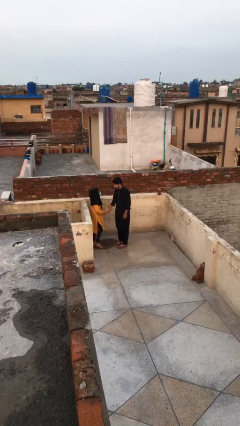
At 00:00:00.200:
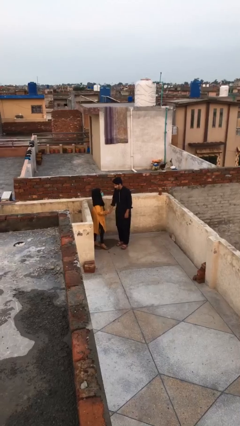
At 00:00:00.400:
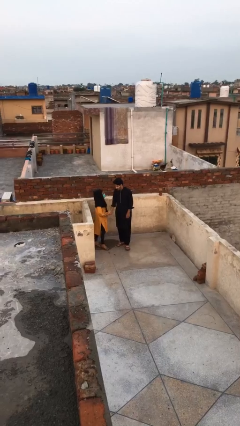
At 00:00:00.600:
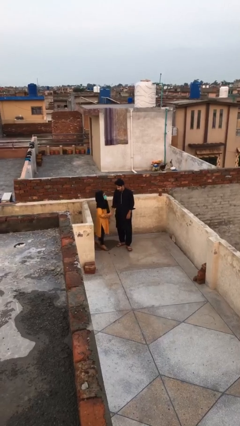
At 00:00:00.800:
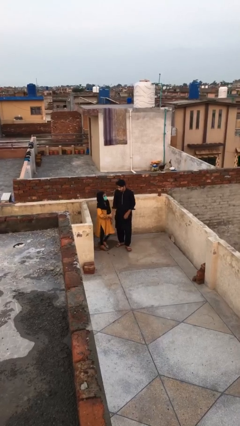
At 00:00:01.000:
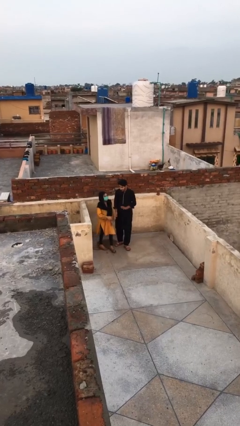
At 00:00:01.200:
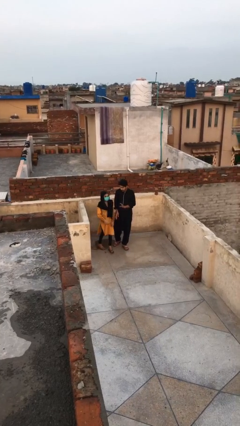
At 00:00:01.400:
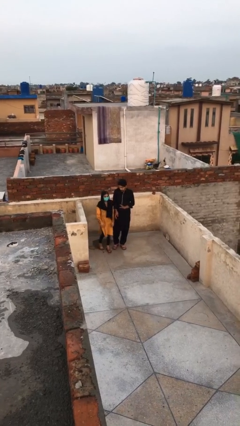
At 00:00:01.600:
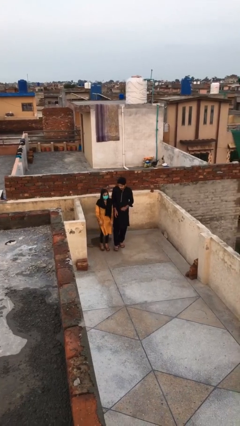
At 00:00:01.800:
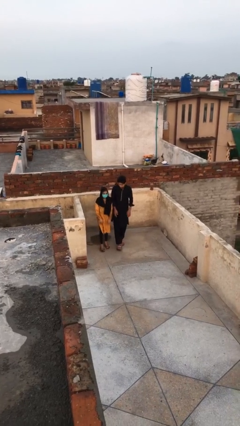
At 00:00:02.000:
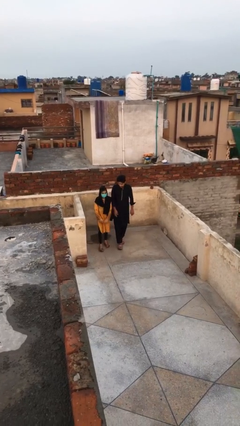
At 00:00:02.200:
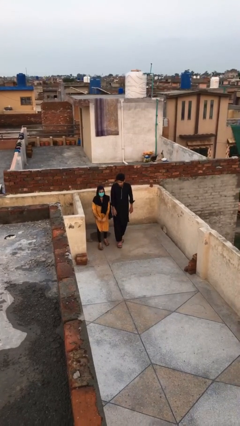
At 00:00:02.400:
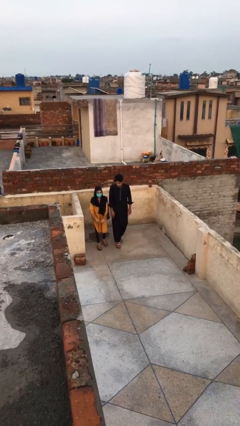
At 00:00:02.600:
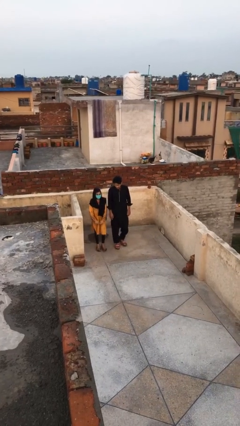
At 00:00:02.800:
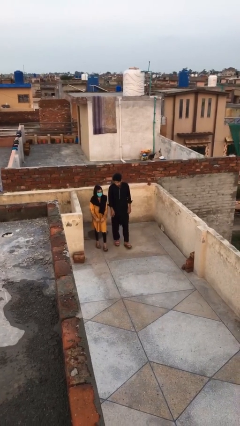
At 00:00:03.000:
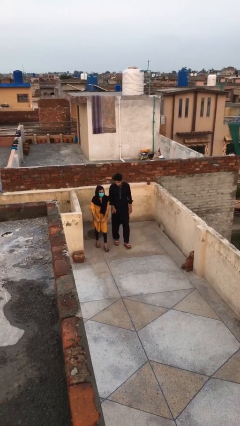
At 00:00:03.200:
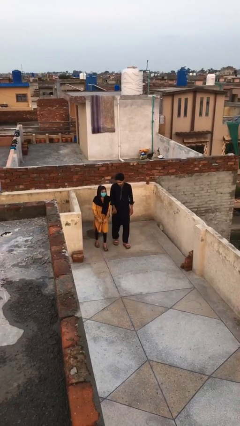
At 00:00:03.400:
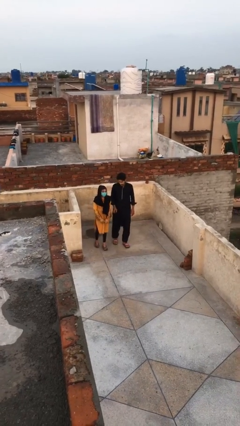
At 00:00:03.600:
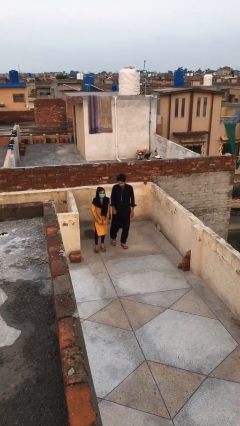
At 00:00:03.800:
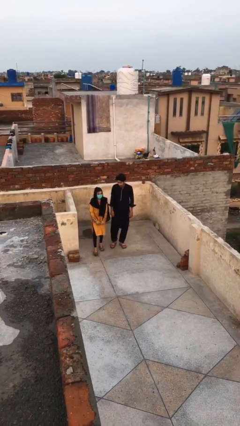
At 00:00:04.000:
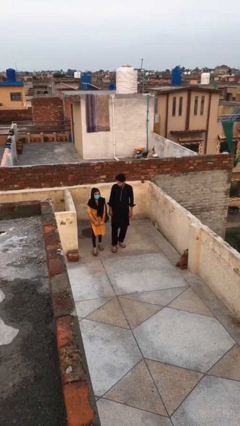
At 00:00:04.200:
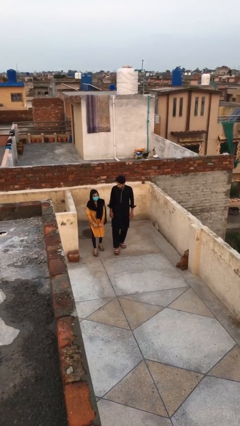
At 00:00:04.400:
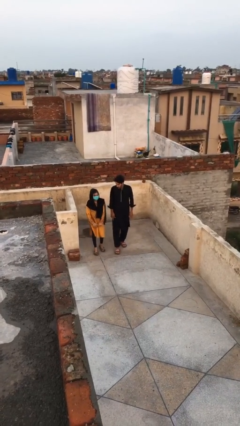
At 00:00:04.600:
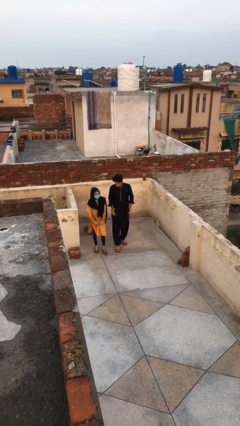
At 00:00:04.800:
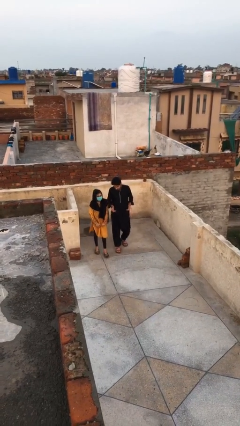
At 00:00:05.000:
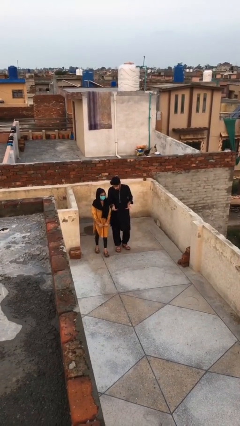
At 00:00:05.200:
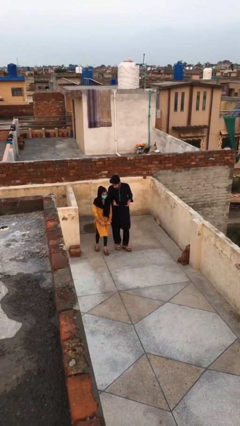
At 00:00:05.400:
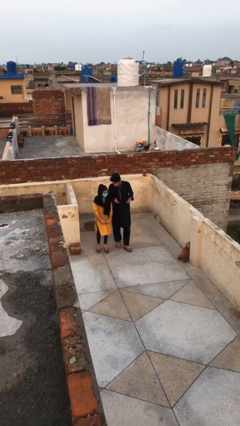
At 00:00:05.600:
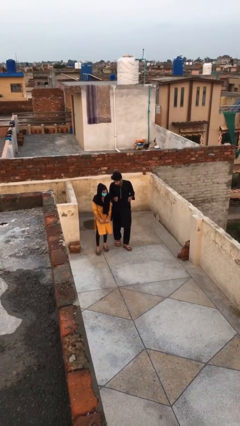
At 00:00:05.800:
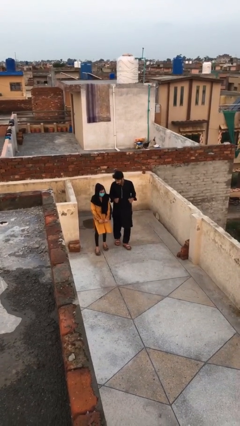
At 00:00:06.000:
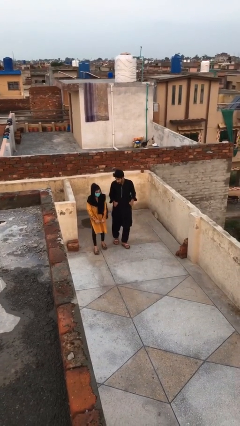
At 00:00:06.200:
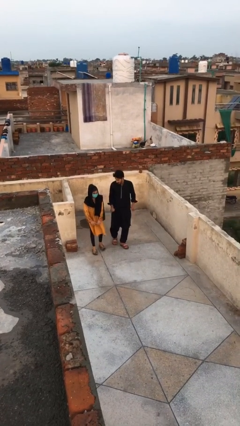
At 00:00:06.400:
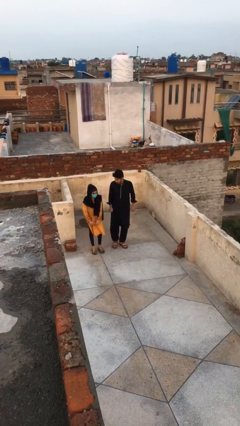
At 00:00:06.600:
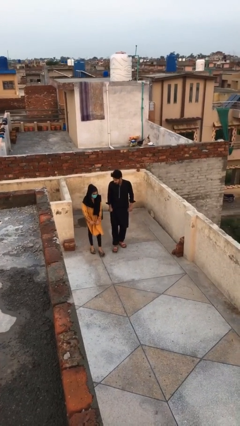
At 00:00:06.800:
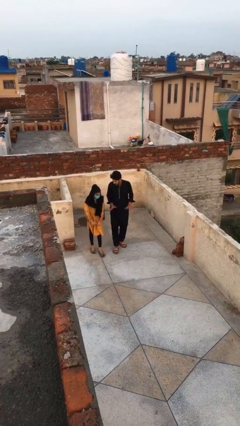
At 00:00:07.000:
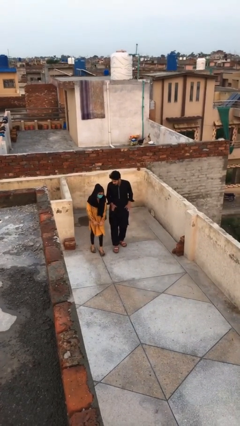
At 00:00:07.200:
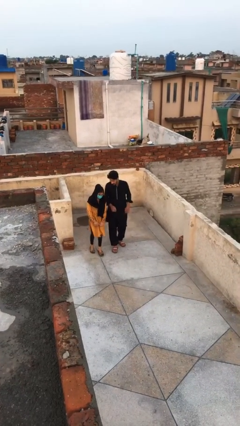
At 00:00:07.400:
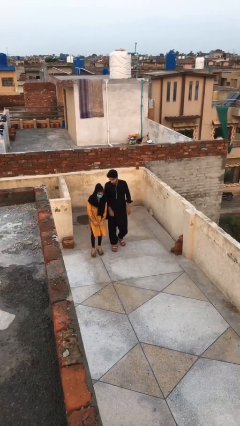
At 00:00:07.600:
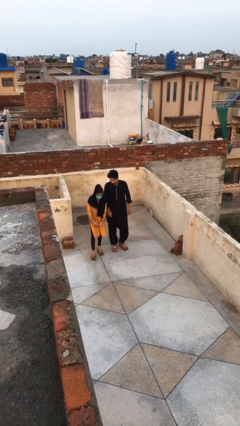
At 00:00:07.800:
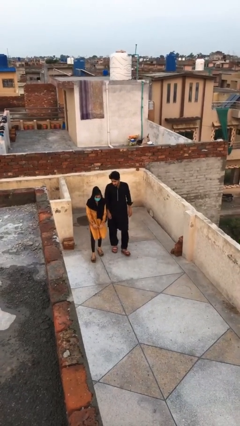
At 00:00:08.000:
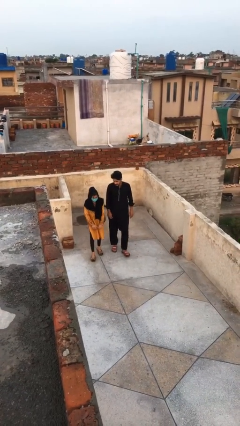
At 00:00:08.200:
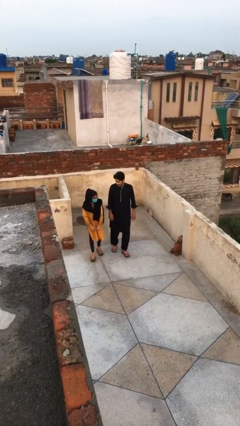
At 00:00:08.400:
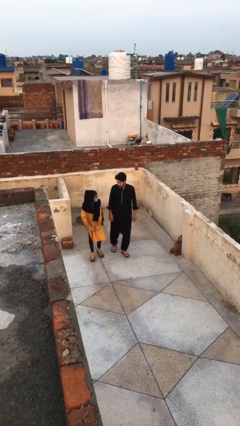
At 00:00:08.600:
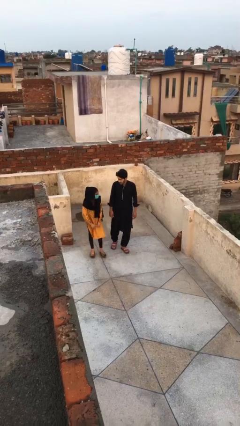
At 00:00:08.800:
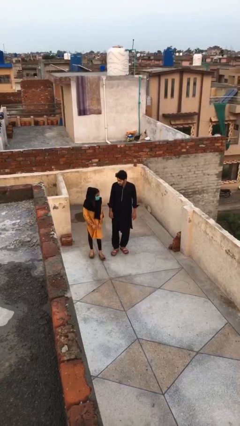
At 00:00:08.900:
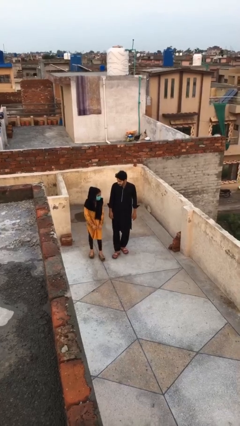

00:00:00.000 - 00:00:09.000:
person talks to person

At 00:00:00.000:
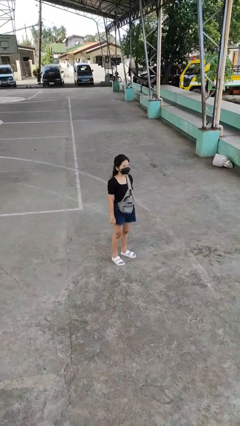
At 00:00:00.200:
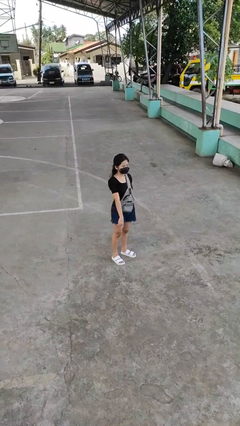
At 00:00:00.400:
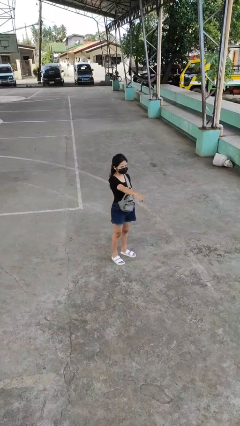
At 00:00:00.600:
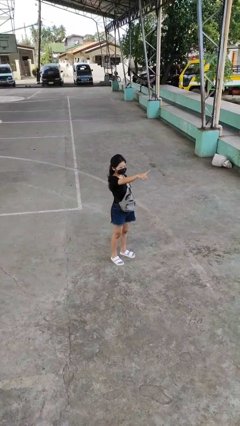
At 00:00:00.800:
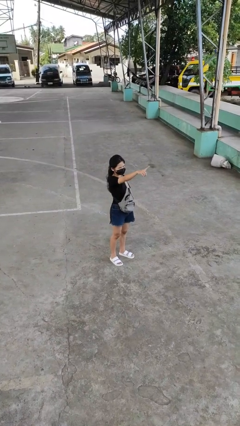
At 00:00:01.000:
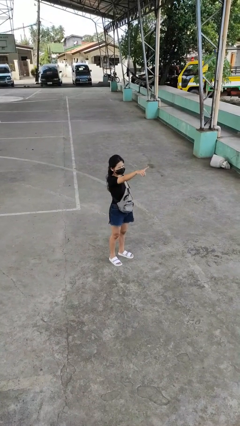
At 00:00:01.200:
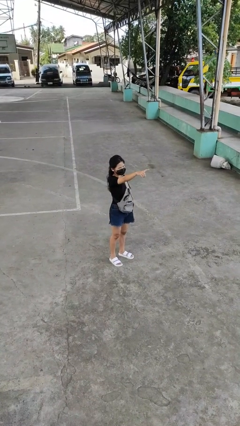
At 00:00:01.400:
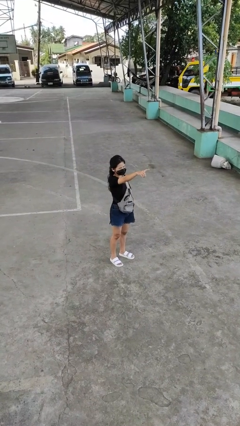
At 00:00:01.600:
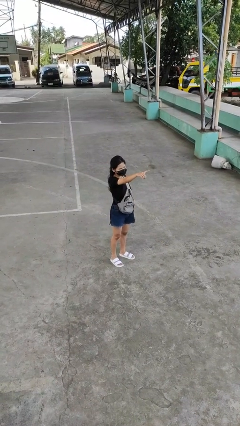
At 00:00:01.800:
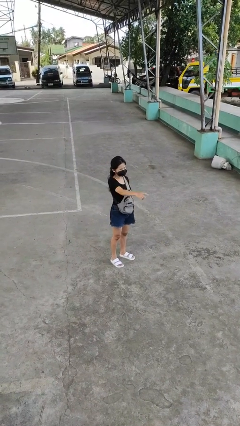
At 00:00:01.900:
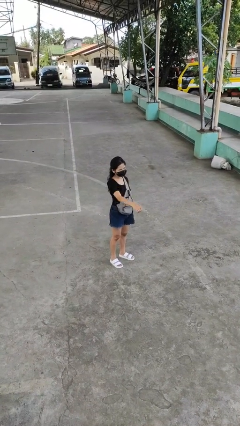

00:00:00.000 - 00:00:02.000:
person points at person

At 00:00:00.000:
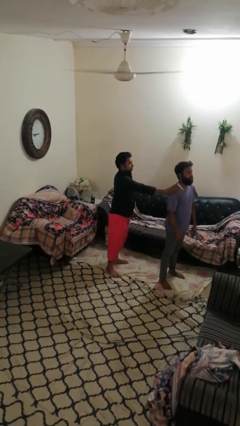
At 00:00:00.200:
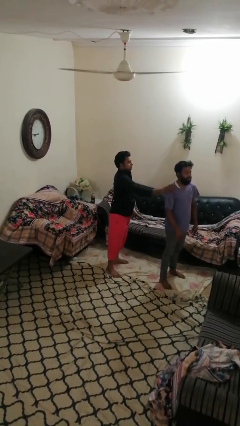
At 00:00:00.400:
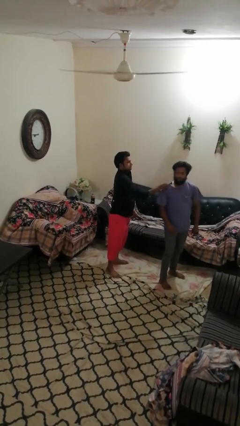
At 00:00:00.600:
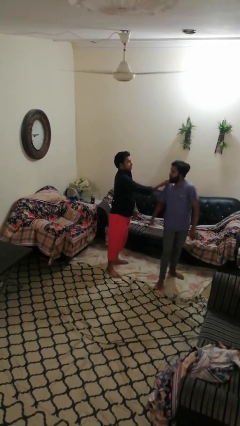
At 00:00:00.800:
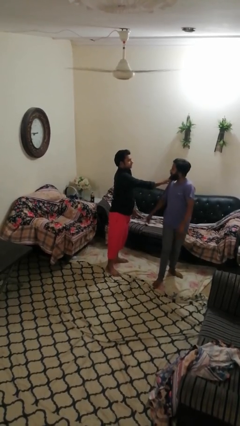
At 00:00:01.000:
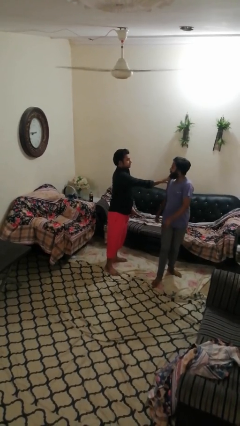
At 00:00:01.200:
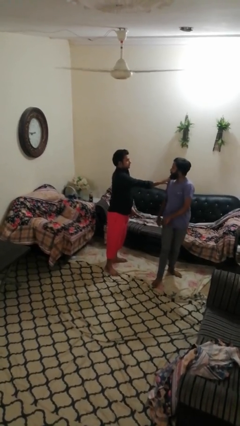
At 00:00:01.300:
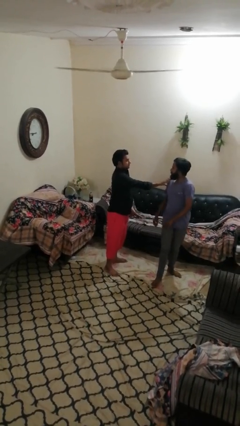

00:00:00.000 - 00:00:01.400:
person spins person around

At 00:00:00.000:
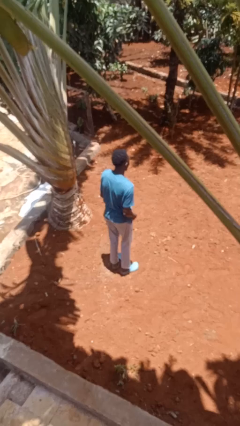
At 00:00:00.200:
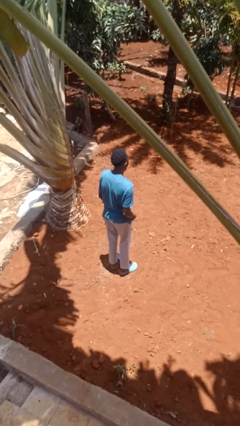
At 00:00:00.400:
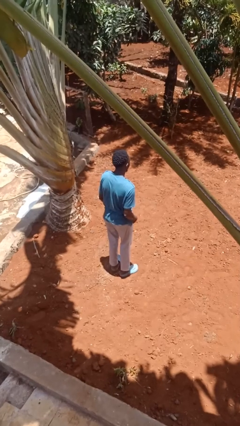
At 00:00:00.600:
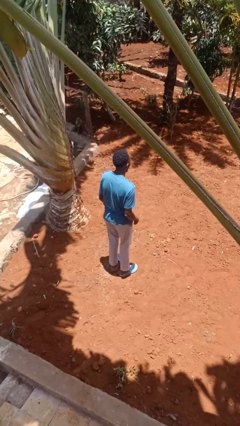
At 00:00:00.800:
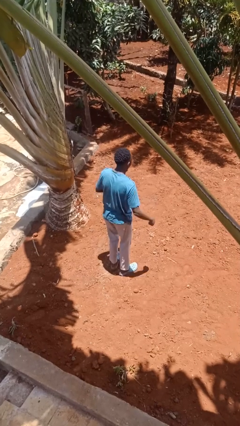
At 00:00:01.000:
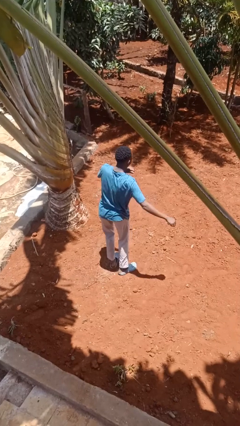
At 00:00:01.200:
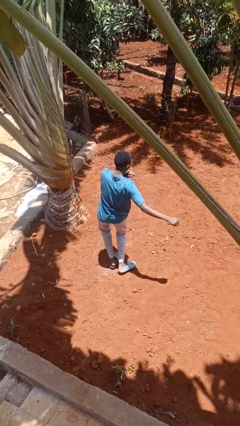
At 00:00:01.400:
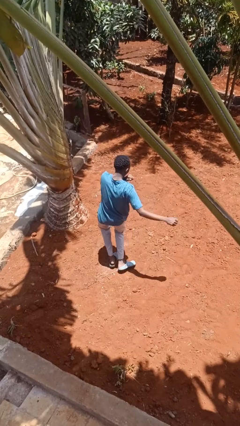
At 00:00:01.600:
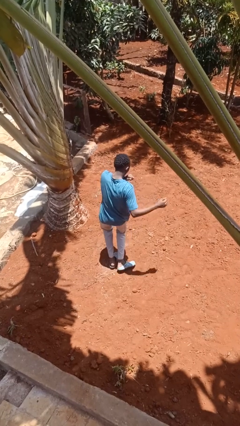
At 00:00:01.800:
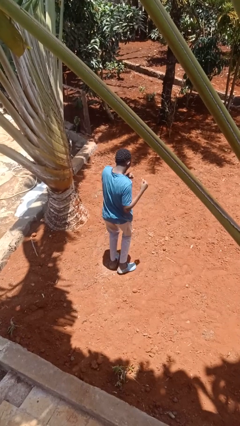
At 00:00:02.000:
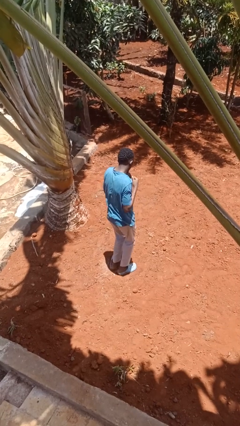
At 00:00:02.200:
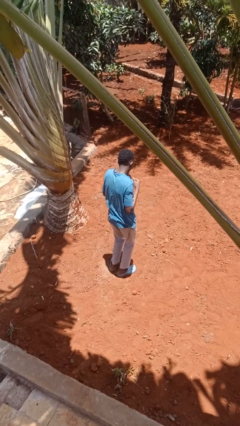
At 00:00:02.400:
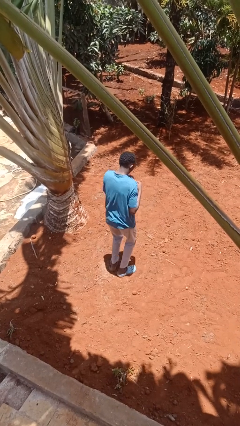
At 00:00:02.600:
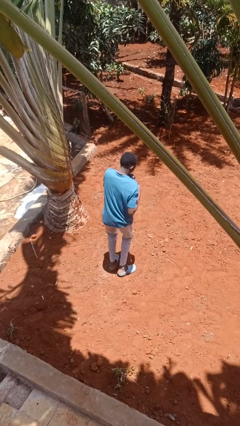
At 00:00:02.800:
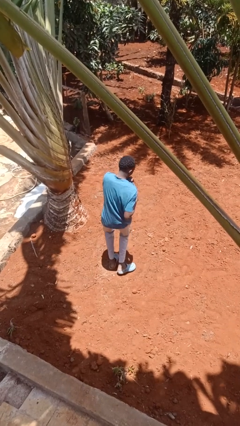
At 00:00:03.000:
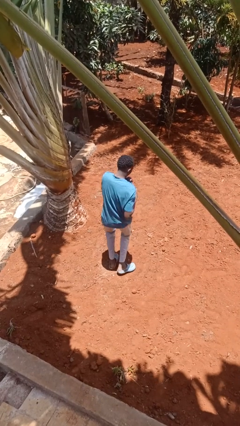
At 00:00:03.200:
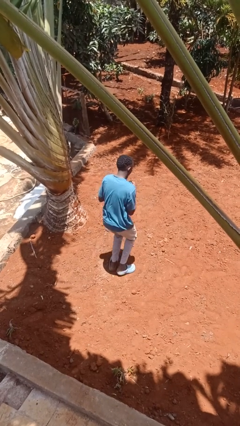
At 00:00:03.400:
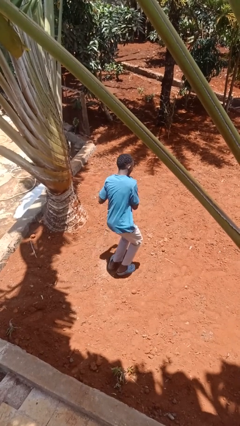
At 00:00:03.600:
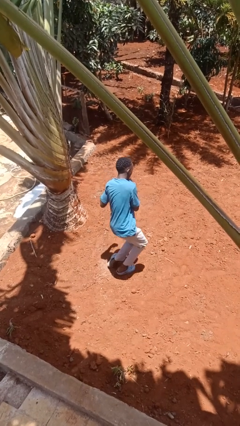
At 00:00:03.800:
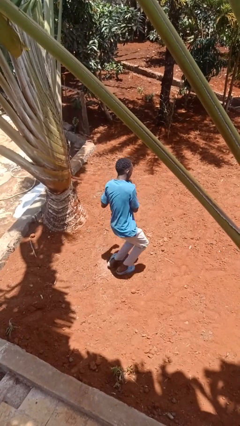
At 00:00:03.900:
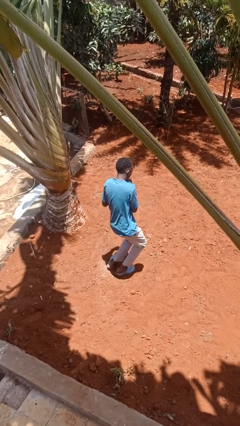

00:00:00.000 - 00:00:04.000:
person dances in place

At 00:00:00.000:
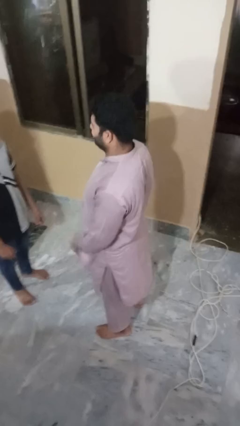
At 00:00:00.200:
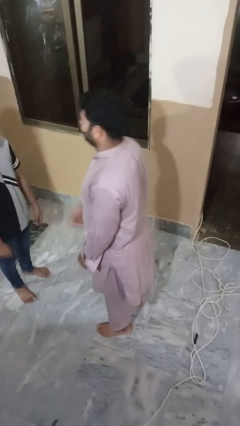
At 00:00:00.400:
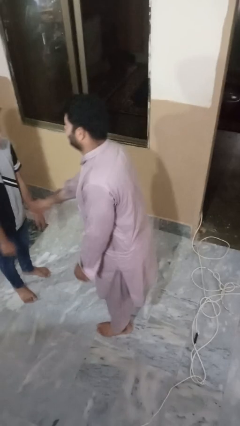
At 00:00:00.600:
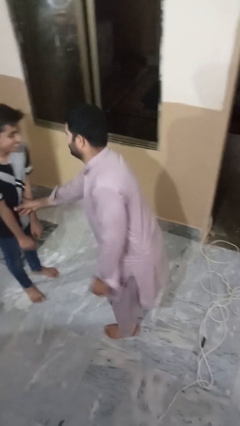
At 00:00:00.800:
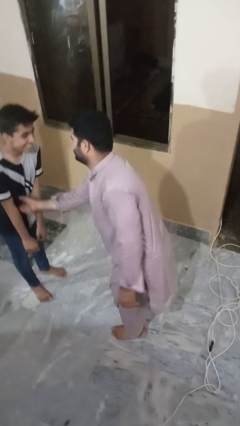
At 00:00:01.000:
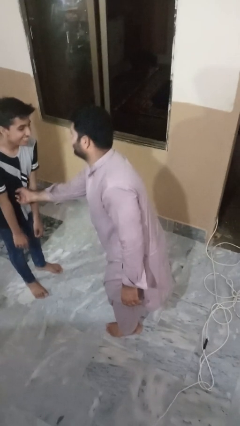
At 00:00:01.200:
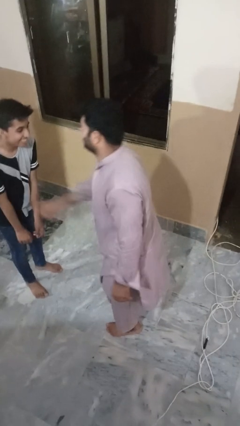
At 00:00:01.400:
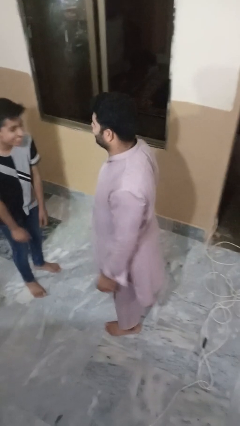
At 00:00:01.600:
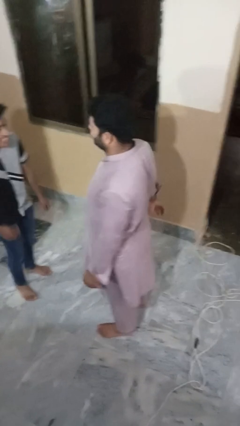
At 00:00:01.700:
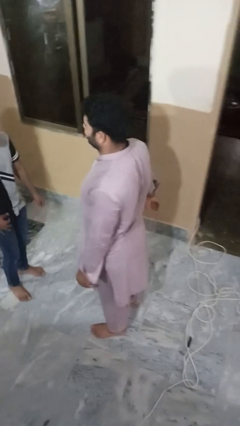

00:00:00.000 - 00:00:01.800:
person tickles person
